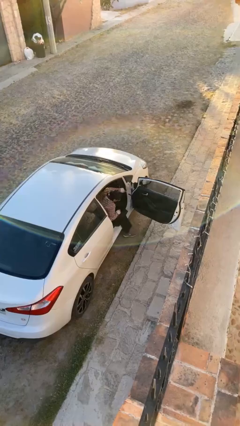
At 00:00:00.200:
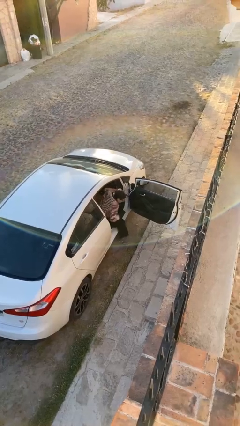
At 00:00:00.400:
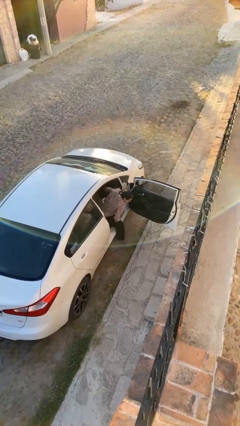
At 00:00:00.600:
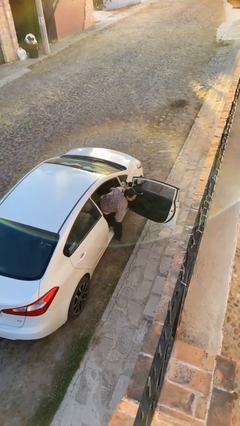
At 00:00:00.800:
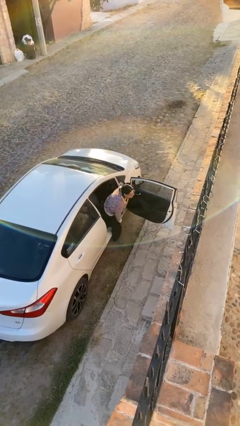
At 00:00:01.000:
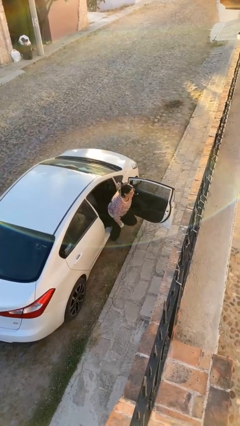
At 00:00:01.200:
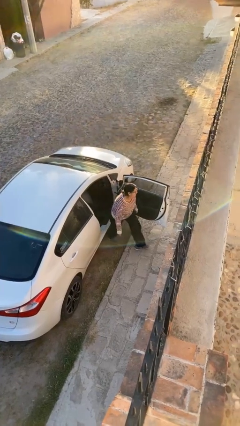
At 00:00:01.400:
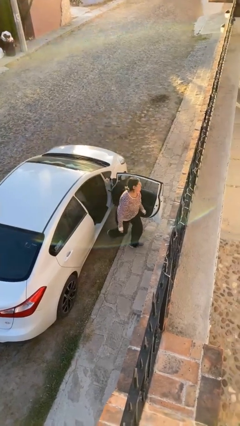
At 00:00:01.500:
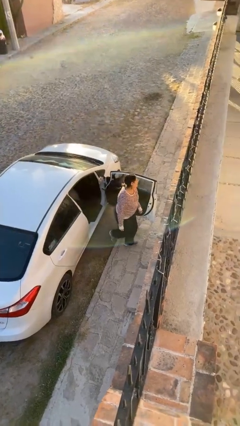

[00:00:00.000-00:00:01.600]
person exits car

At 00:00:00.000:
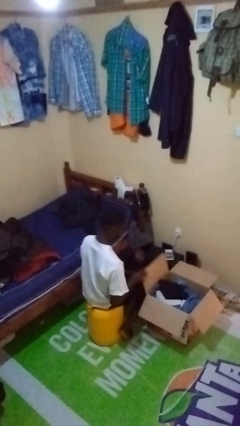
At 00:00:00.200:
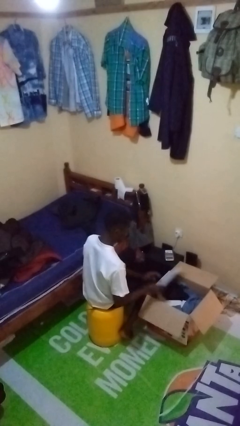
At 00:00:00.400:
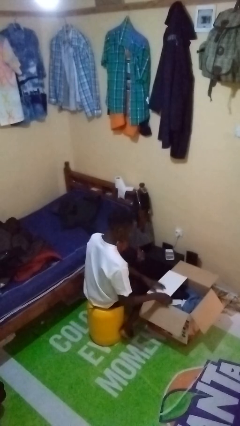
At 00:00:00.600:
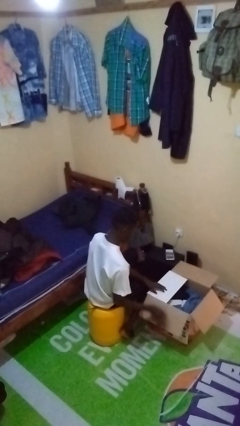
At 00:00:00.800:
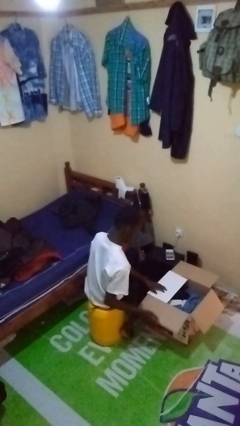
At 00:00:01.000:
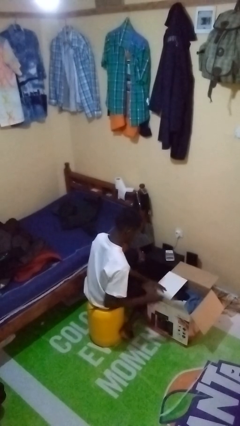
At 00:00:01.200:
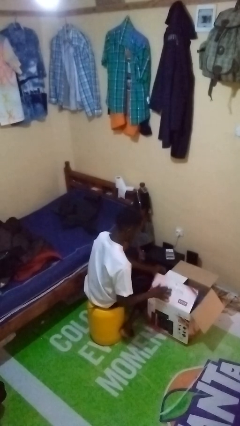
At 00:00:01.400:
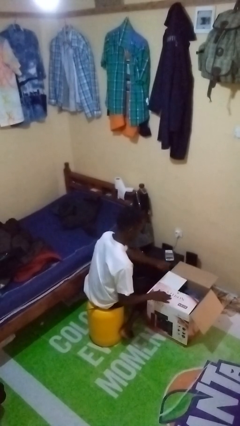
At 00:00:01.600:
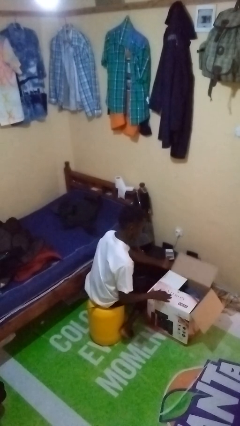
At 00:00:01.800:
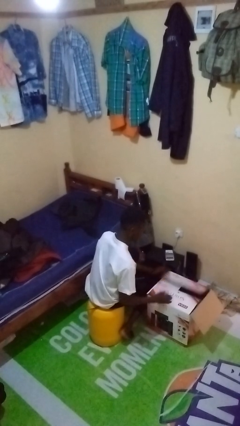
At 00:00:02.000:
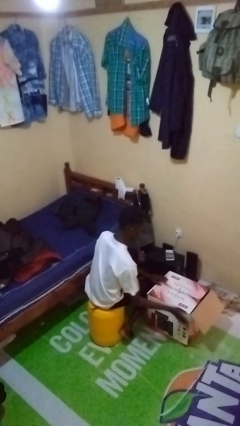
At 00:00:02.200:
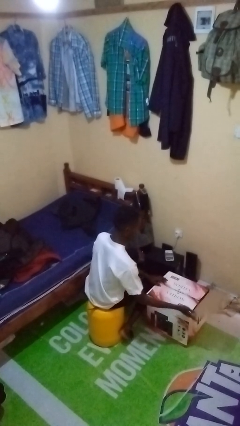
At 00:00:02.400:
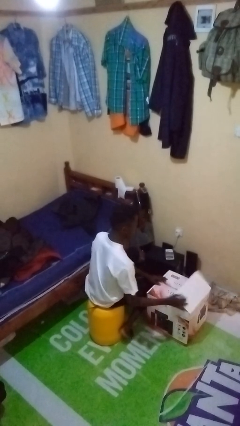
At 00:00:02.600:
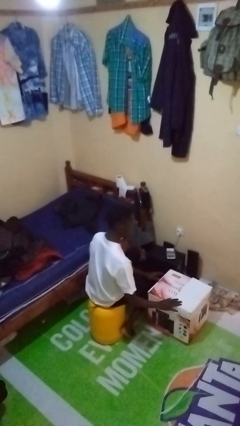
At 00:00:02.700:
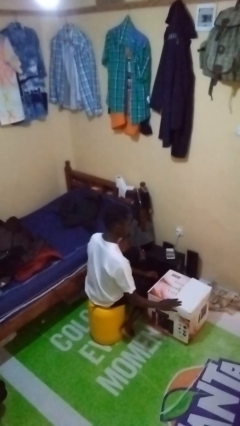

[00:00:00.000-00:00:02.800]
person closes box

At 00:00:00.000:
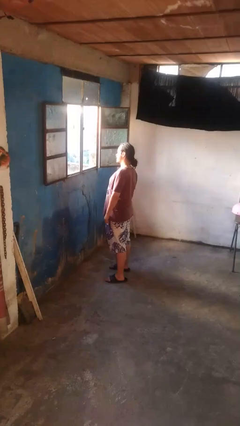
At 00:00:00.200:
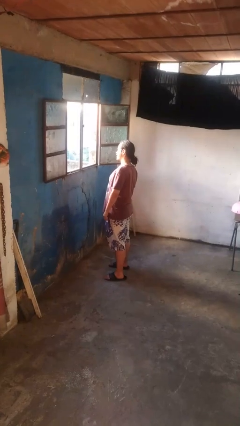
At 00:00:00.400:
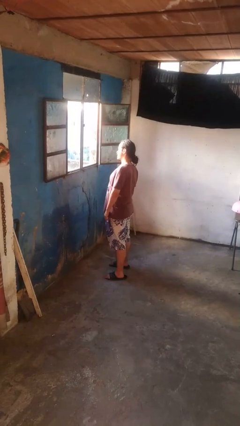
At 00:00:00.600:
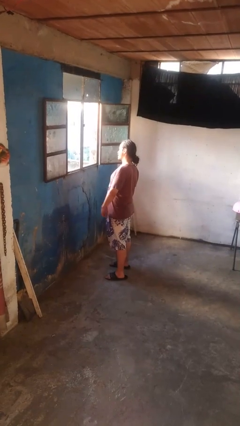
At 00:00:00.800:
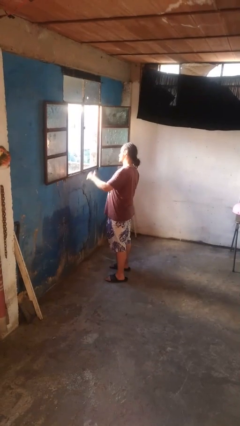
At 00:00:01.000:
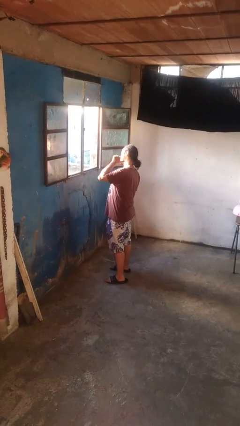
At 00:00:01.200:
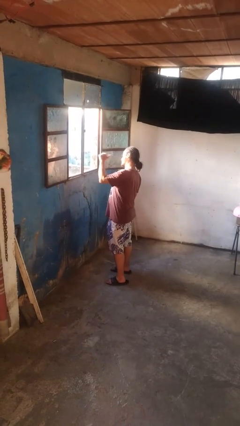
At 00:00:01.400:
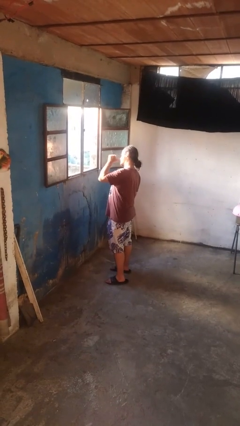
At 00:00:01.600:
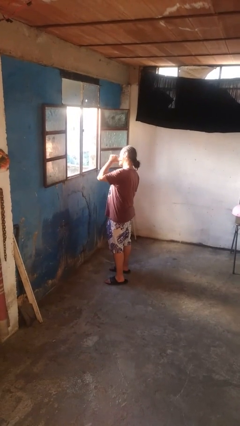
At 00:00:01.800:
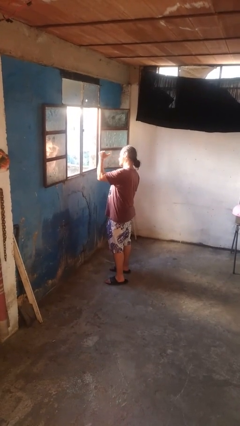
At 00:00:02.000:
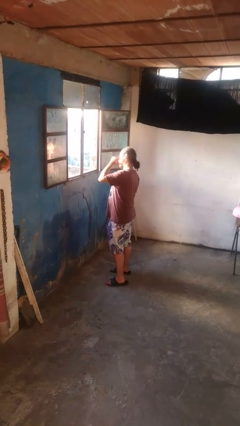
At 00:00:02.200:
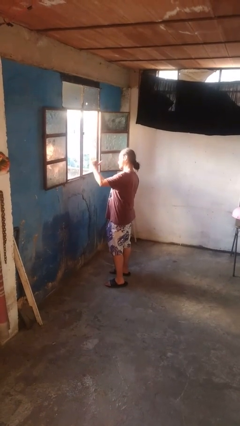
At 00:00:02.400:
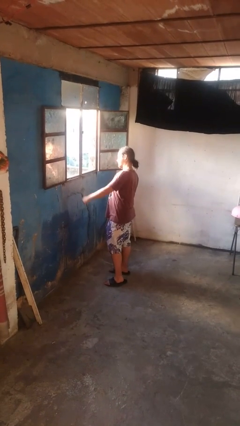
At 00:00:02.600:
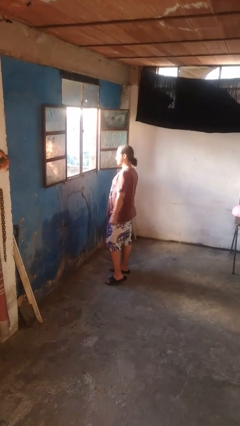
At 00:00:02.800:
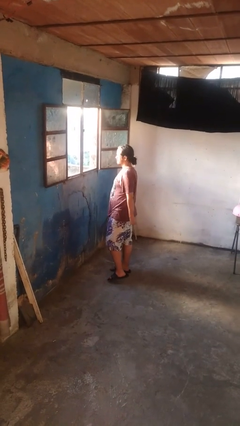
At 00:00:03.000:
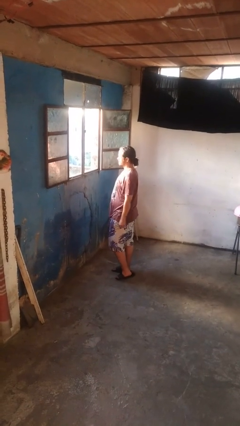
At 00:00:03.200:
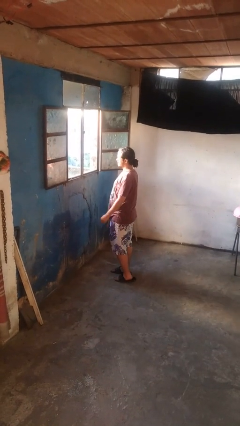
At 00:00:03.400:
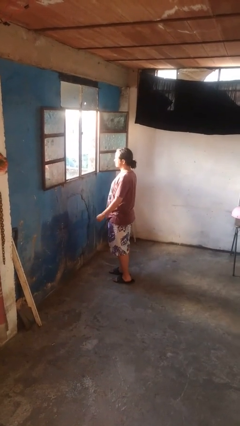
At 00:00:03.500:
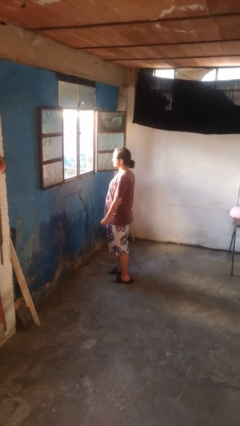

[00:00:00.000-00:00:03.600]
person gestures behind me

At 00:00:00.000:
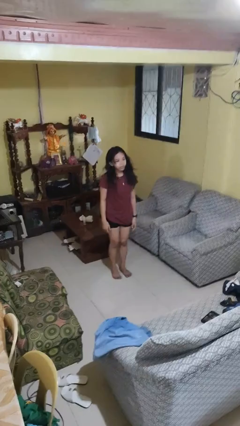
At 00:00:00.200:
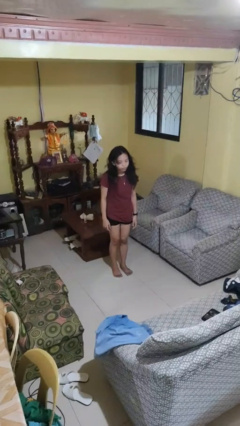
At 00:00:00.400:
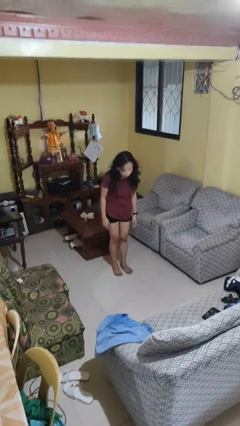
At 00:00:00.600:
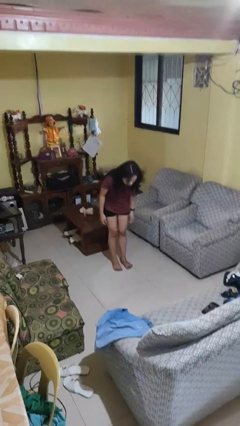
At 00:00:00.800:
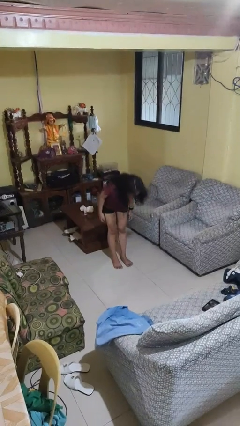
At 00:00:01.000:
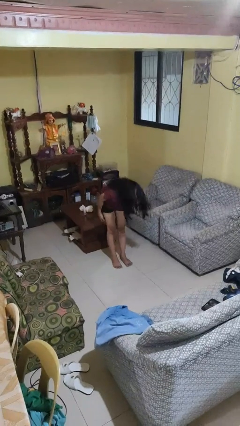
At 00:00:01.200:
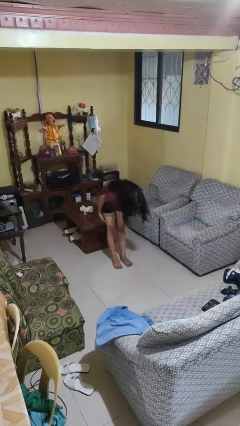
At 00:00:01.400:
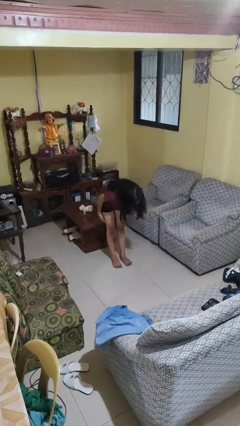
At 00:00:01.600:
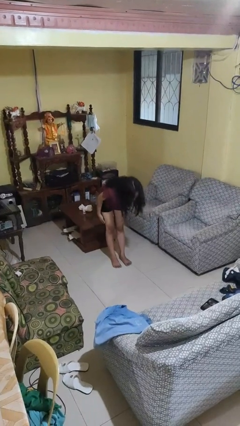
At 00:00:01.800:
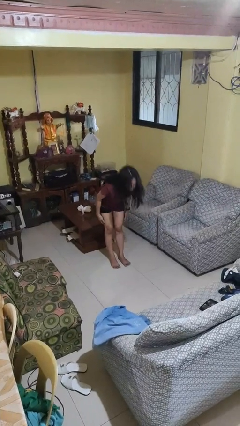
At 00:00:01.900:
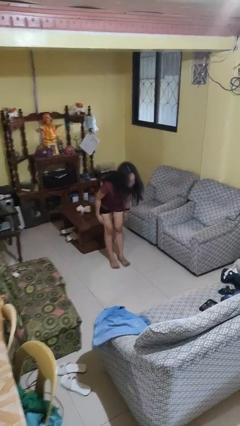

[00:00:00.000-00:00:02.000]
person bows

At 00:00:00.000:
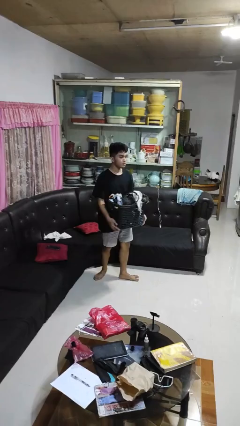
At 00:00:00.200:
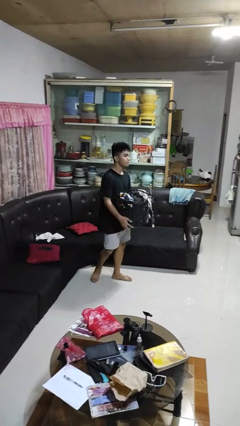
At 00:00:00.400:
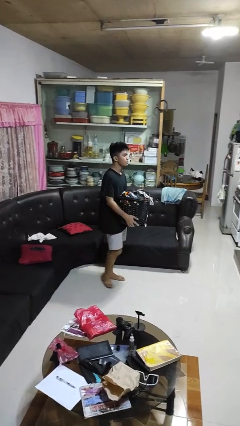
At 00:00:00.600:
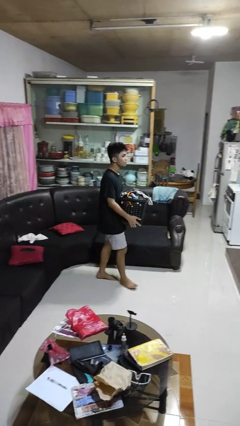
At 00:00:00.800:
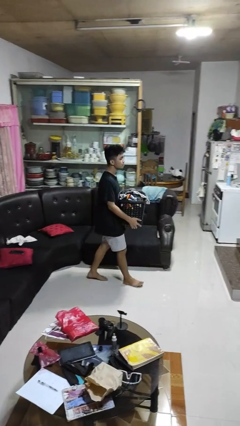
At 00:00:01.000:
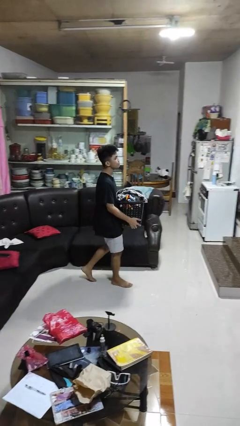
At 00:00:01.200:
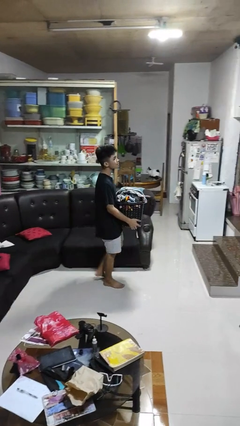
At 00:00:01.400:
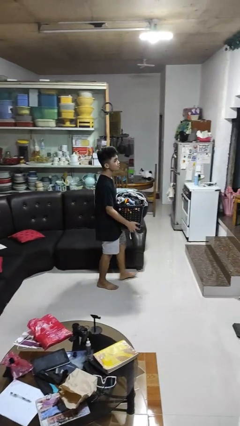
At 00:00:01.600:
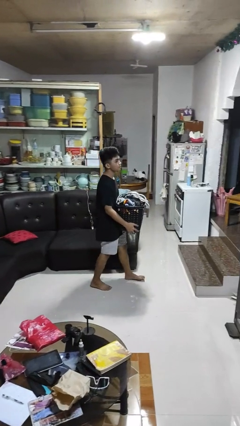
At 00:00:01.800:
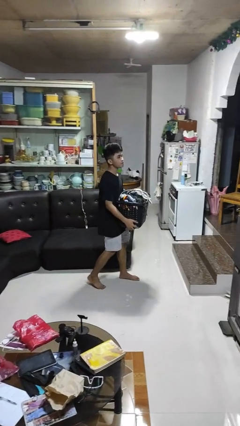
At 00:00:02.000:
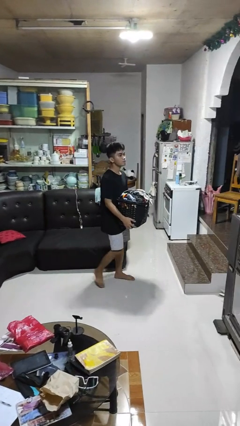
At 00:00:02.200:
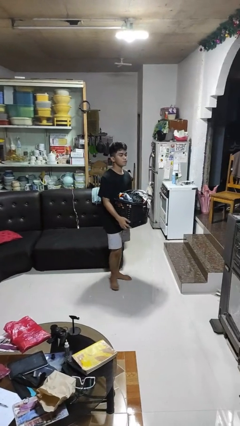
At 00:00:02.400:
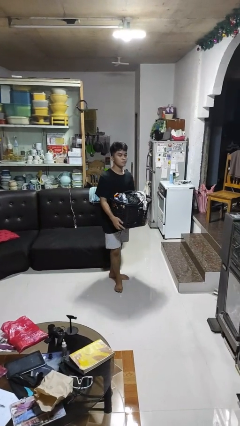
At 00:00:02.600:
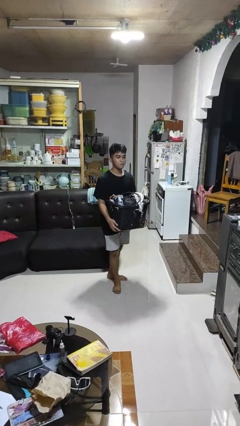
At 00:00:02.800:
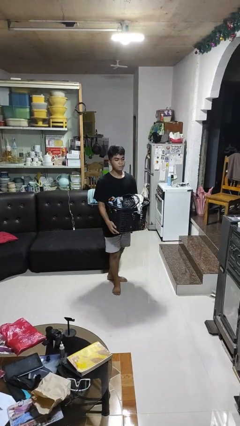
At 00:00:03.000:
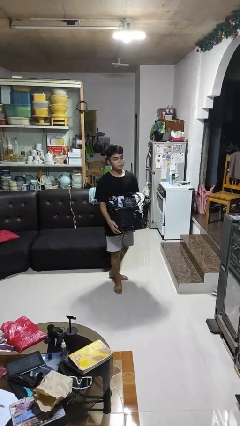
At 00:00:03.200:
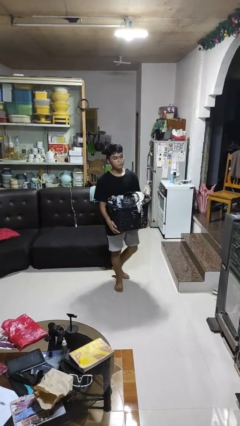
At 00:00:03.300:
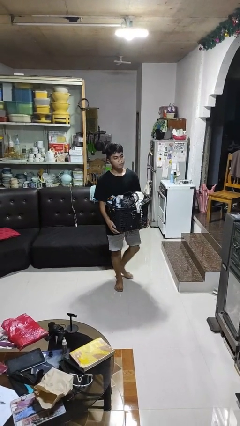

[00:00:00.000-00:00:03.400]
person carries laundry basket

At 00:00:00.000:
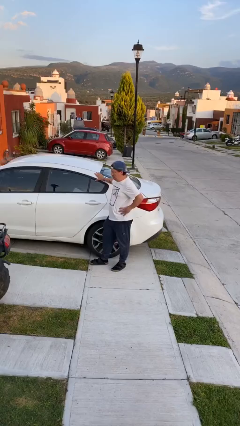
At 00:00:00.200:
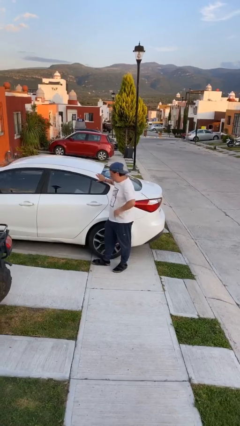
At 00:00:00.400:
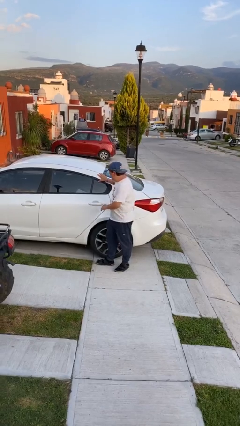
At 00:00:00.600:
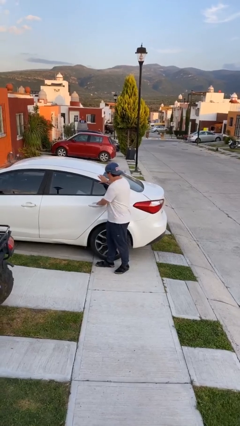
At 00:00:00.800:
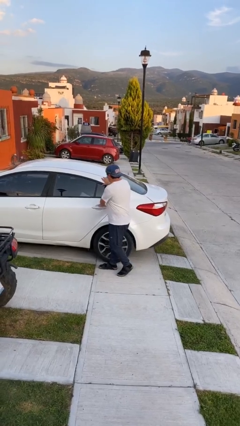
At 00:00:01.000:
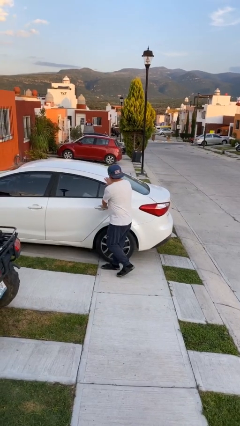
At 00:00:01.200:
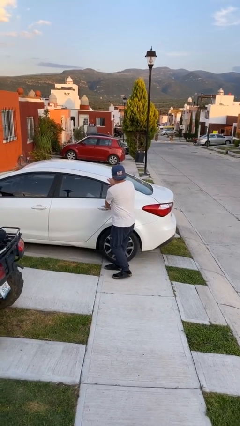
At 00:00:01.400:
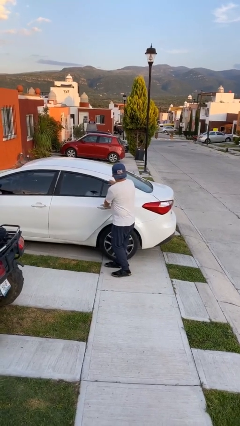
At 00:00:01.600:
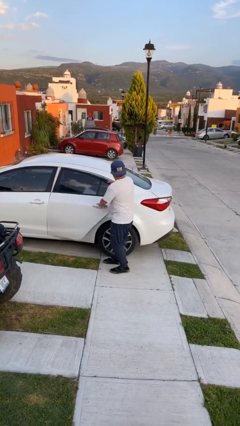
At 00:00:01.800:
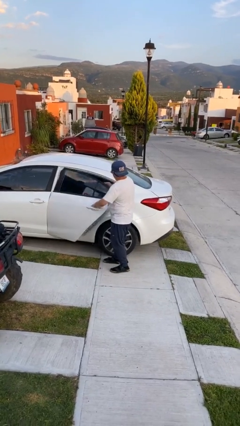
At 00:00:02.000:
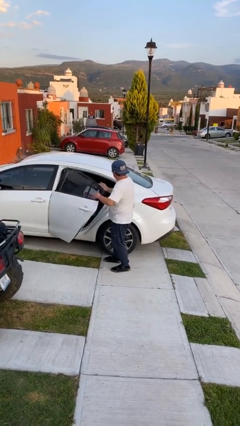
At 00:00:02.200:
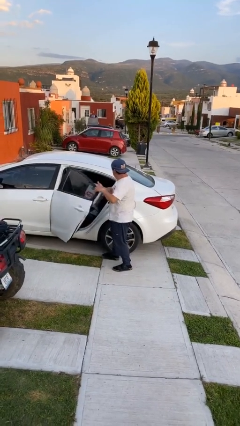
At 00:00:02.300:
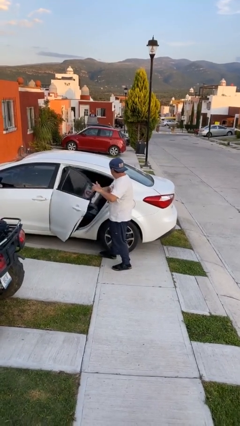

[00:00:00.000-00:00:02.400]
person opens car door

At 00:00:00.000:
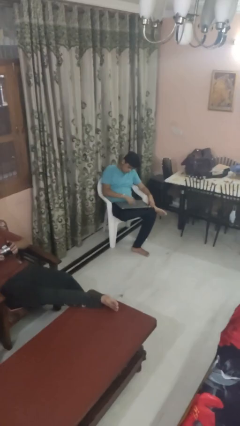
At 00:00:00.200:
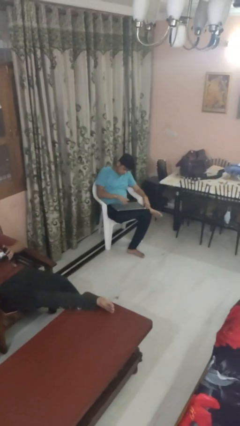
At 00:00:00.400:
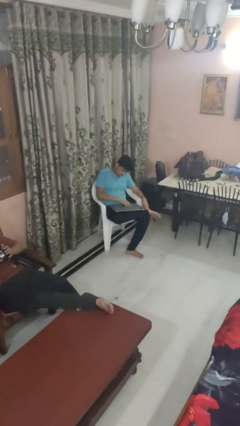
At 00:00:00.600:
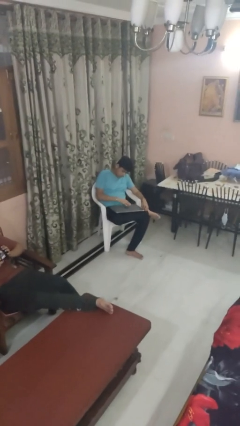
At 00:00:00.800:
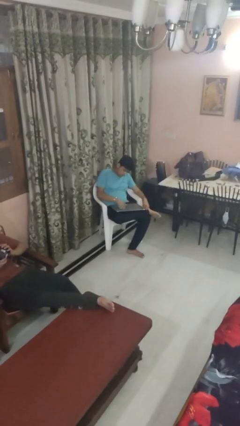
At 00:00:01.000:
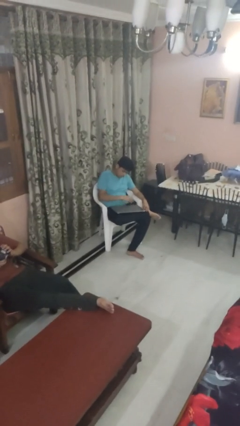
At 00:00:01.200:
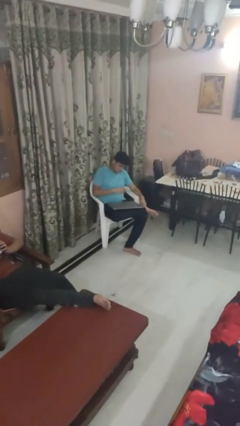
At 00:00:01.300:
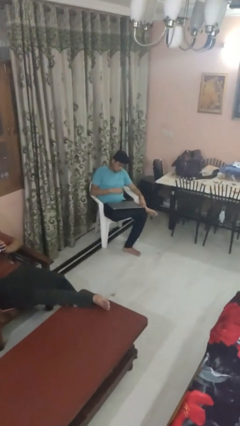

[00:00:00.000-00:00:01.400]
person waves hand over object
